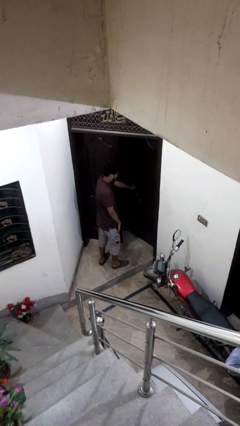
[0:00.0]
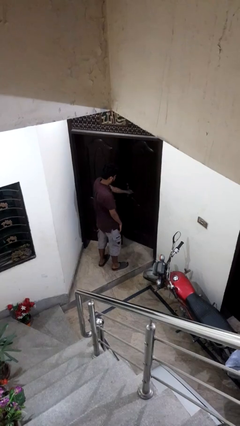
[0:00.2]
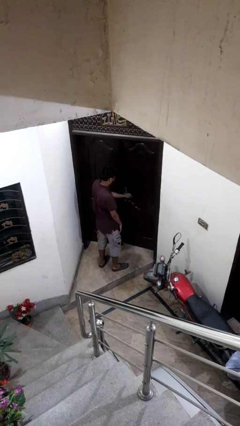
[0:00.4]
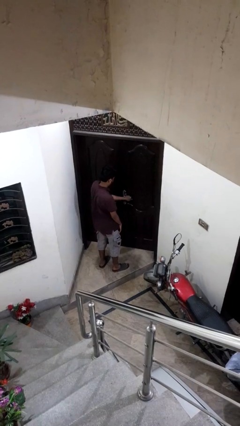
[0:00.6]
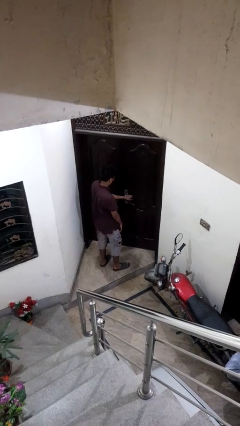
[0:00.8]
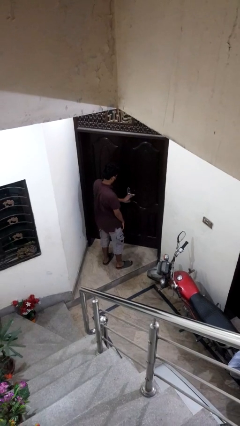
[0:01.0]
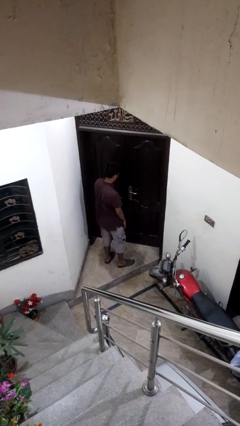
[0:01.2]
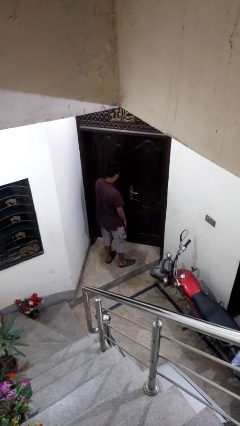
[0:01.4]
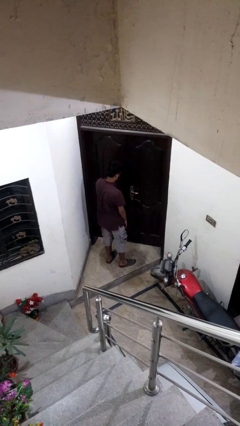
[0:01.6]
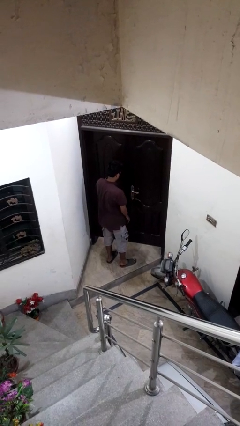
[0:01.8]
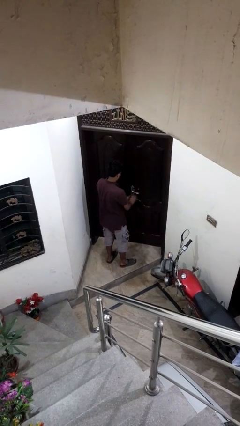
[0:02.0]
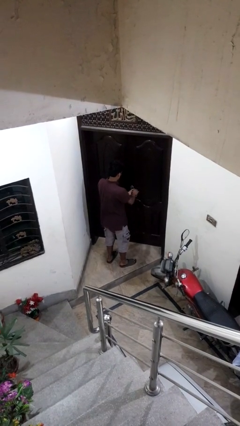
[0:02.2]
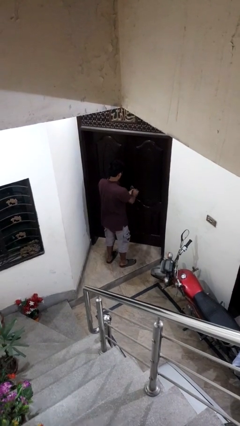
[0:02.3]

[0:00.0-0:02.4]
person closes facility door

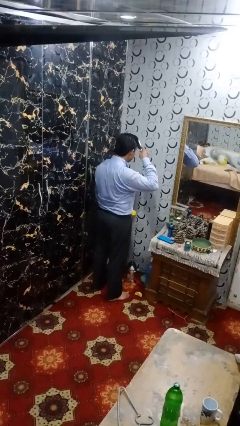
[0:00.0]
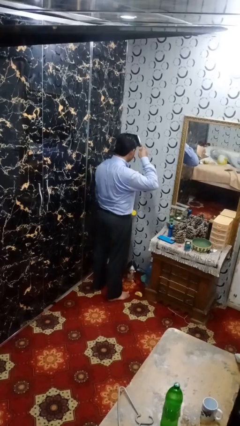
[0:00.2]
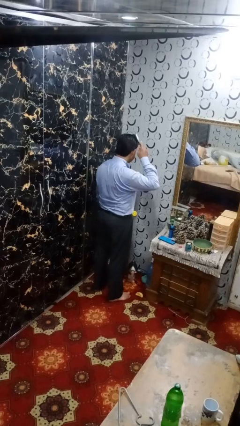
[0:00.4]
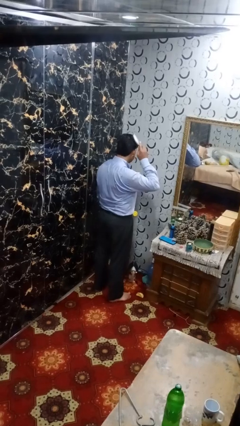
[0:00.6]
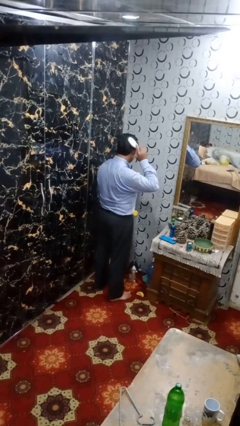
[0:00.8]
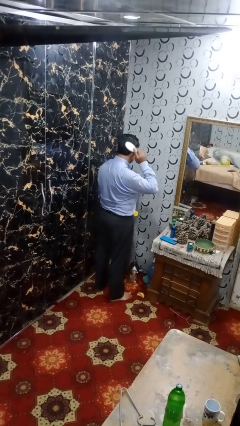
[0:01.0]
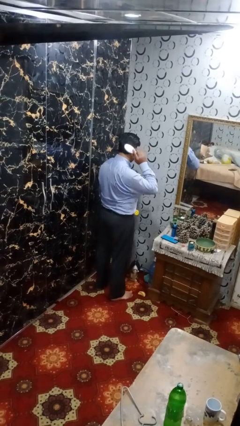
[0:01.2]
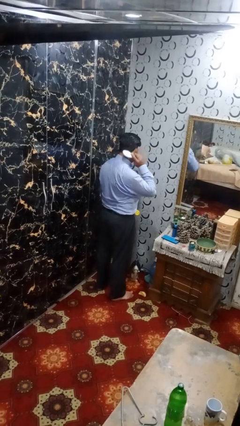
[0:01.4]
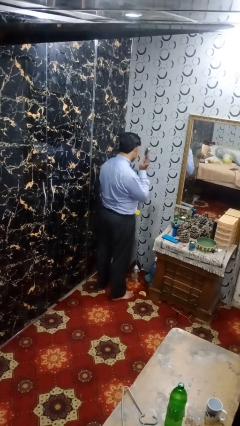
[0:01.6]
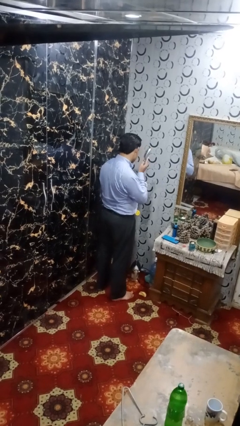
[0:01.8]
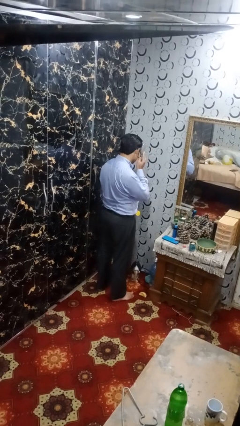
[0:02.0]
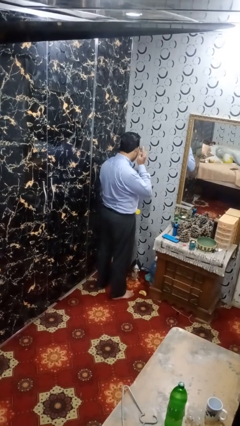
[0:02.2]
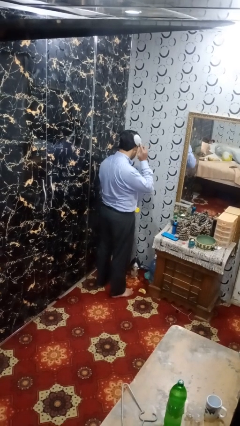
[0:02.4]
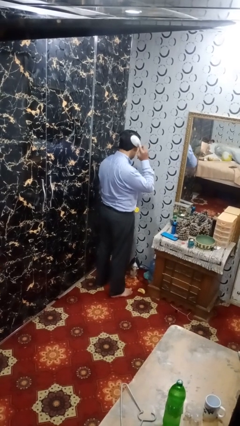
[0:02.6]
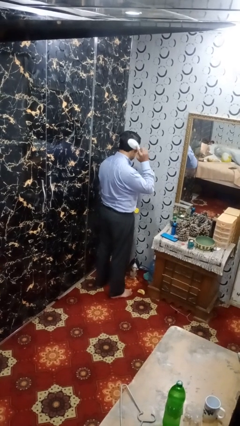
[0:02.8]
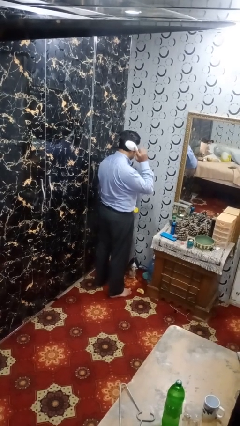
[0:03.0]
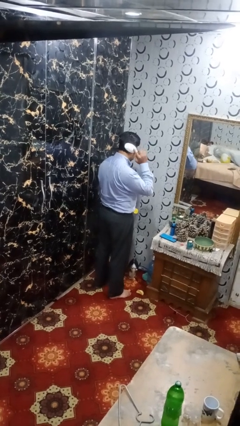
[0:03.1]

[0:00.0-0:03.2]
person brushes hair

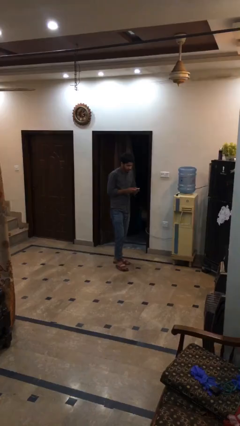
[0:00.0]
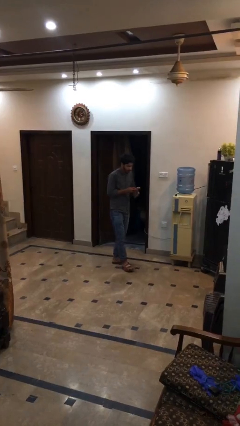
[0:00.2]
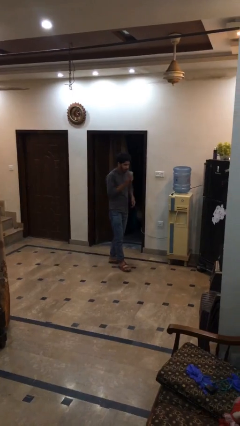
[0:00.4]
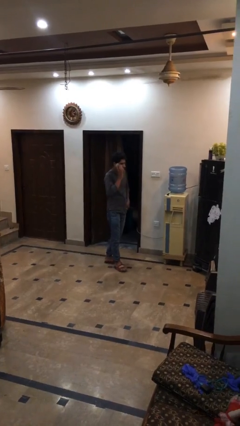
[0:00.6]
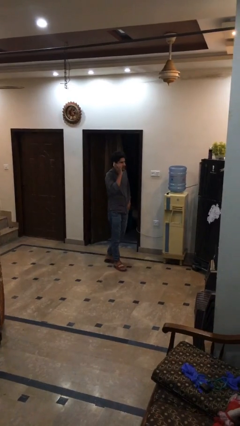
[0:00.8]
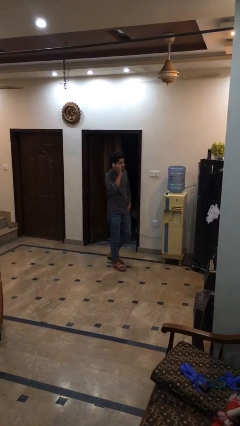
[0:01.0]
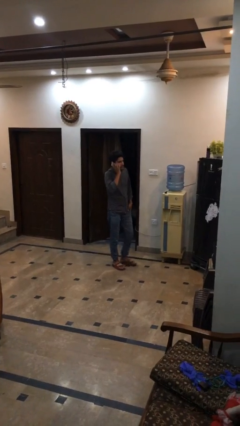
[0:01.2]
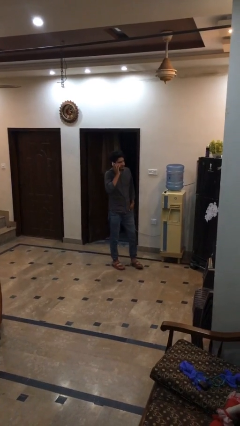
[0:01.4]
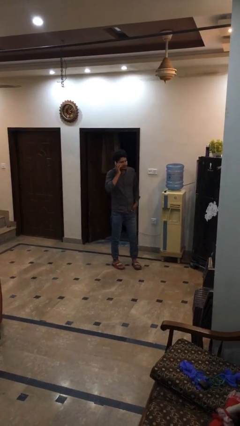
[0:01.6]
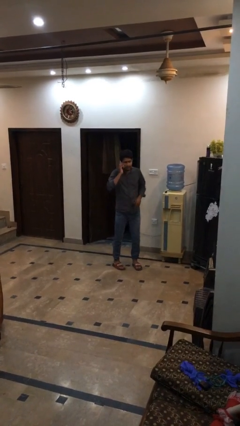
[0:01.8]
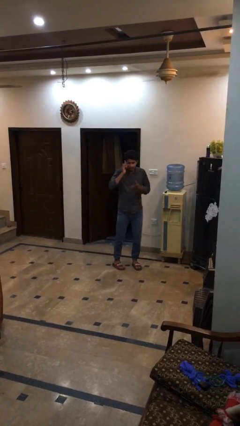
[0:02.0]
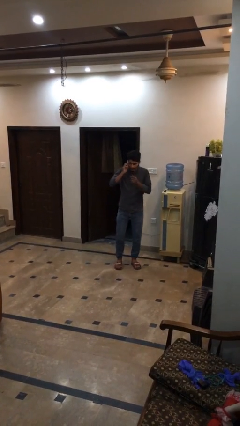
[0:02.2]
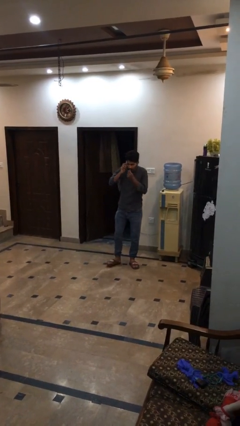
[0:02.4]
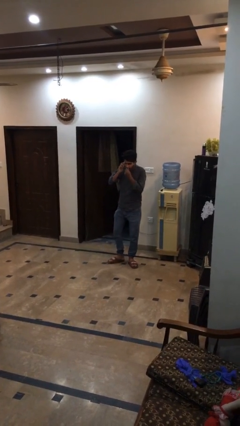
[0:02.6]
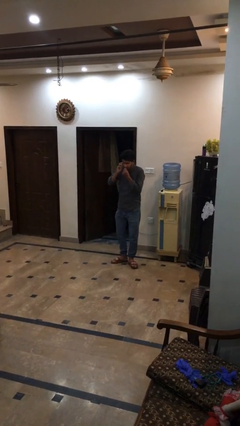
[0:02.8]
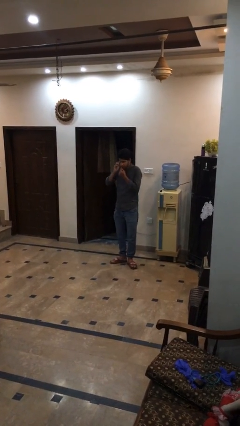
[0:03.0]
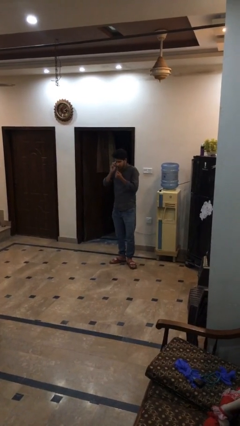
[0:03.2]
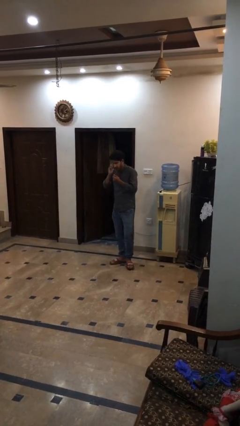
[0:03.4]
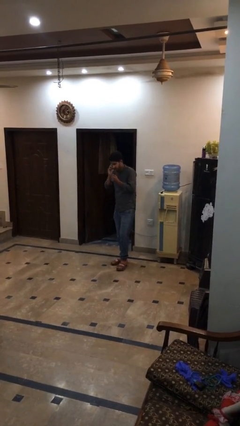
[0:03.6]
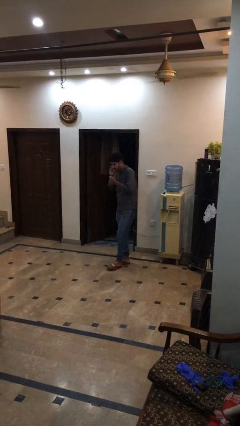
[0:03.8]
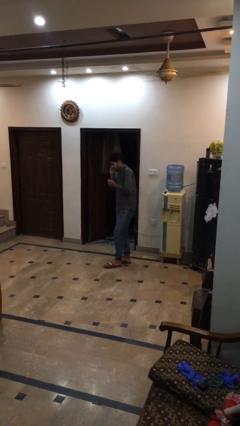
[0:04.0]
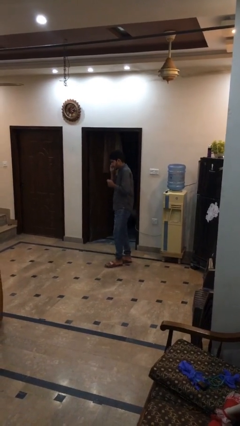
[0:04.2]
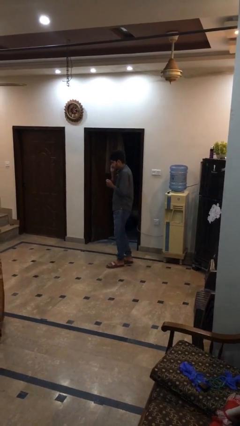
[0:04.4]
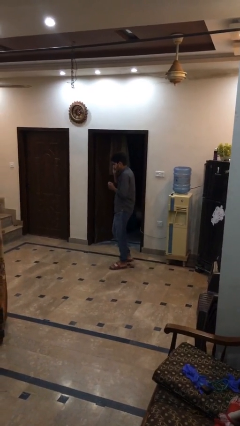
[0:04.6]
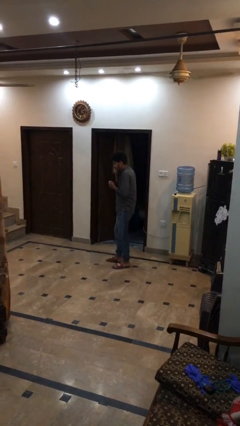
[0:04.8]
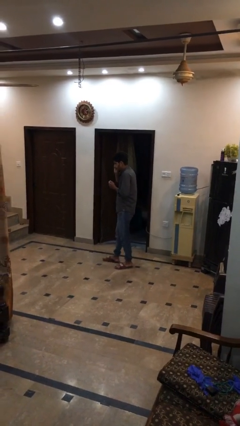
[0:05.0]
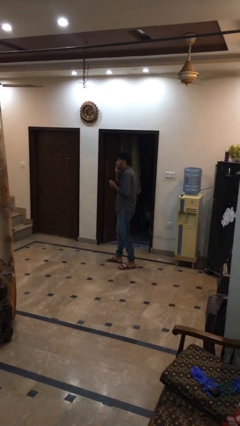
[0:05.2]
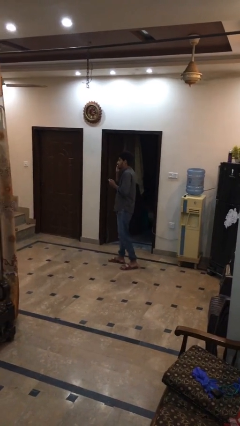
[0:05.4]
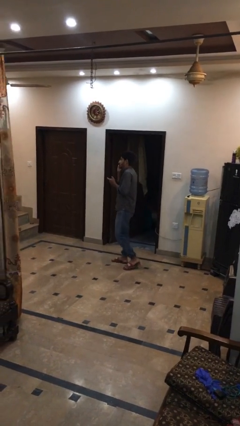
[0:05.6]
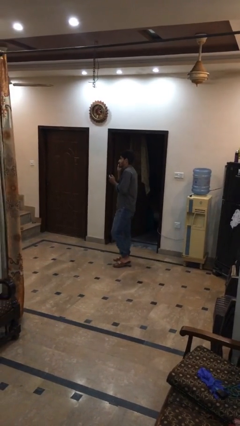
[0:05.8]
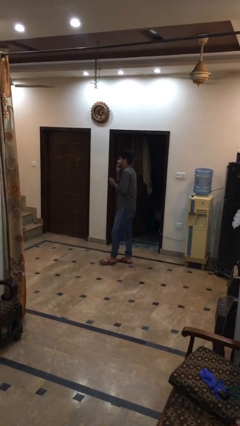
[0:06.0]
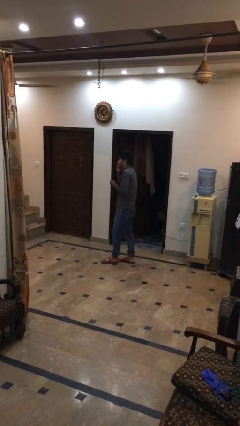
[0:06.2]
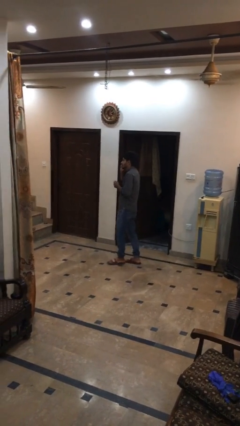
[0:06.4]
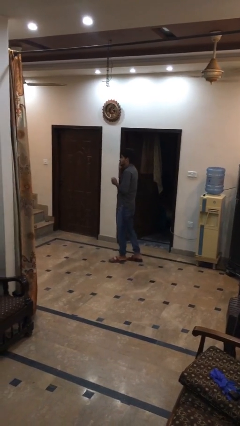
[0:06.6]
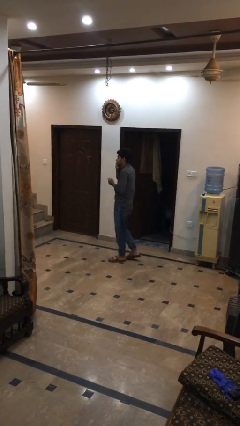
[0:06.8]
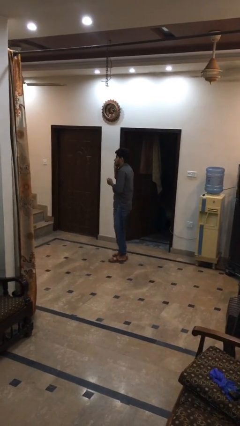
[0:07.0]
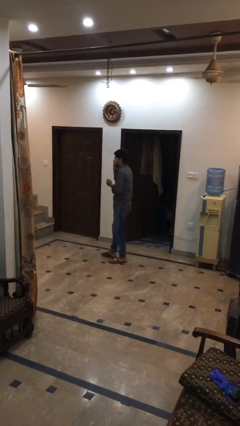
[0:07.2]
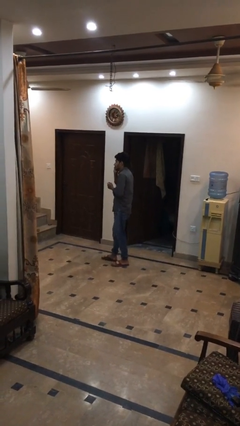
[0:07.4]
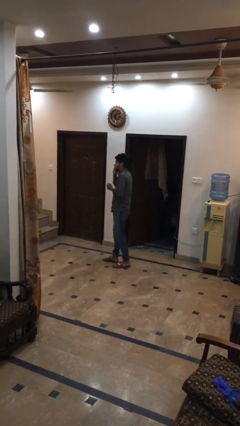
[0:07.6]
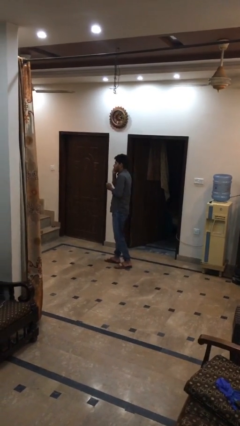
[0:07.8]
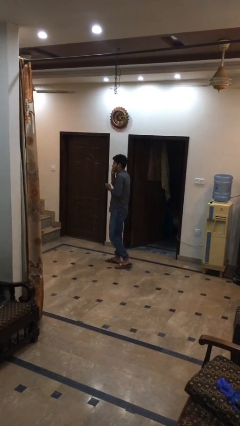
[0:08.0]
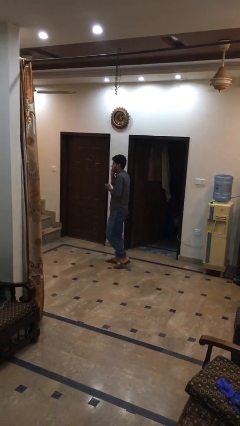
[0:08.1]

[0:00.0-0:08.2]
person talks on phone

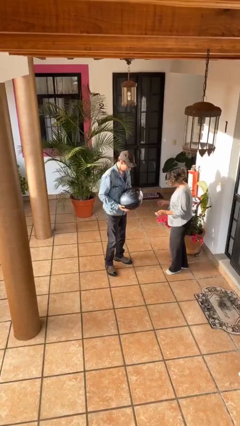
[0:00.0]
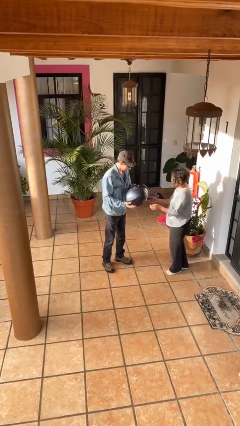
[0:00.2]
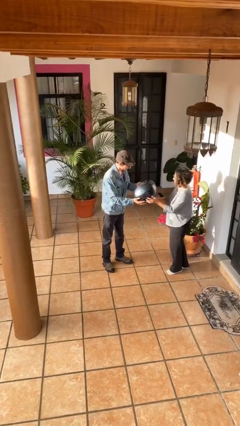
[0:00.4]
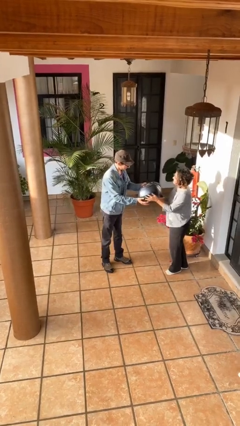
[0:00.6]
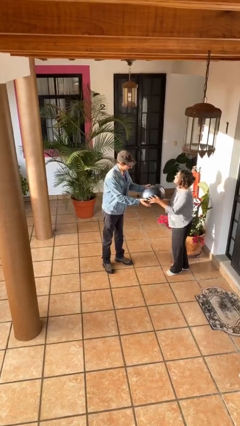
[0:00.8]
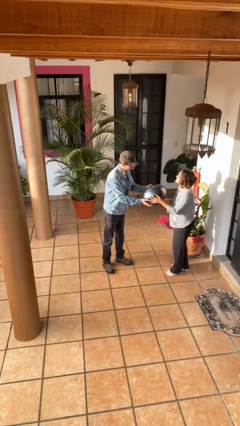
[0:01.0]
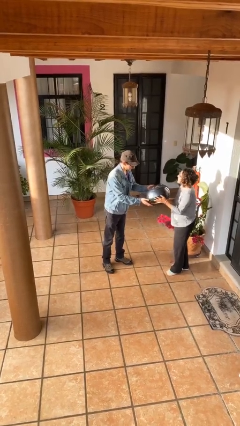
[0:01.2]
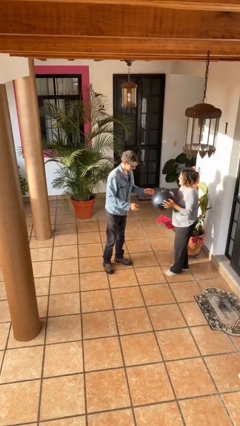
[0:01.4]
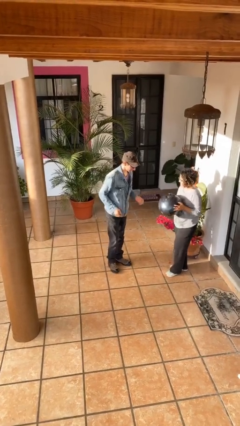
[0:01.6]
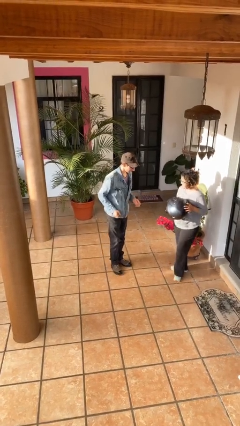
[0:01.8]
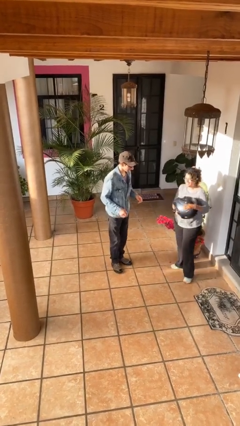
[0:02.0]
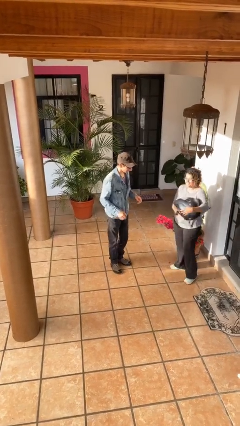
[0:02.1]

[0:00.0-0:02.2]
person transfers object to person

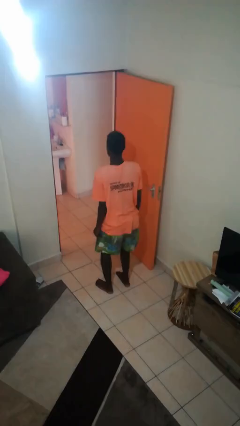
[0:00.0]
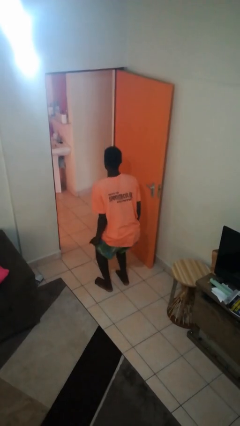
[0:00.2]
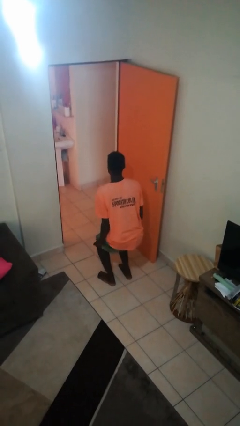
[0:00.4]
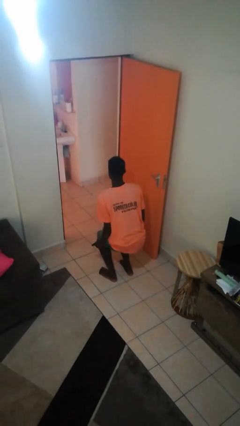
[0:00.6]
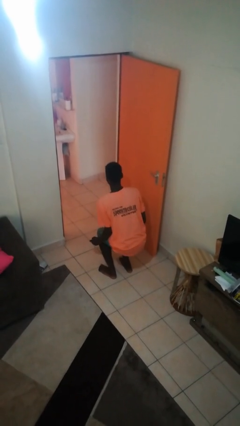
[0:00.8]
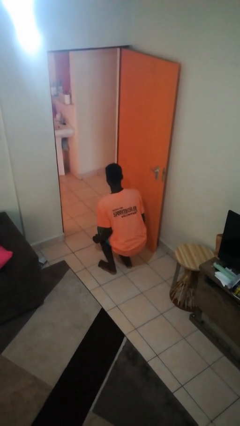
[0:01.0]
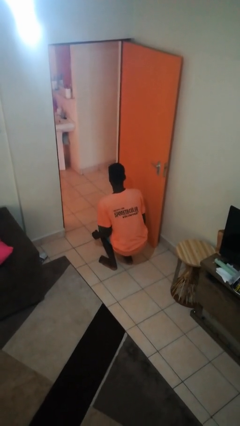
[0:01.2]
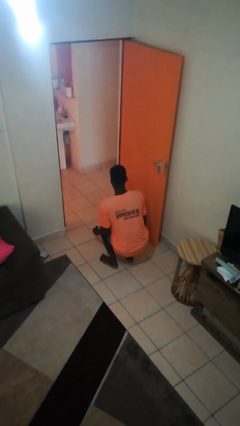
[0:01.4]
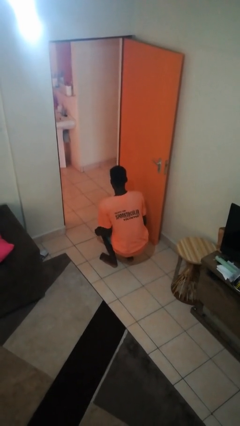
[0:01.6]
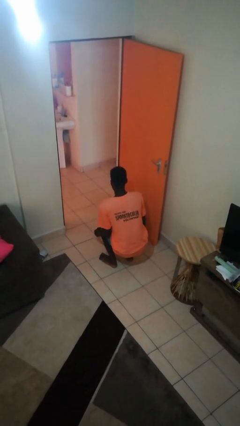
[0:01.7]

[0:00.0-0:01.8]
person squats
